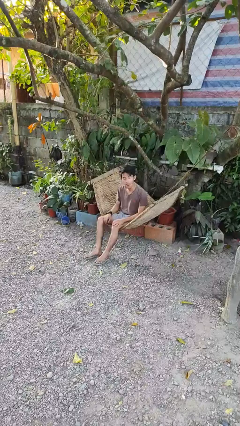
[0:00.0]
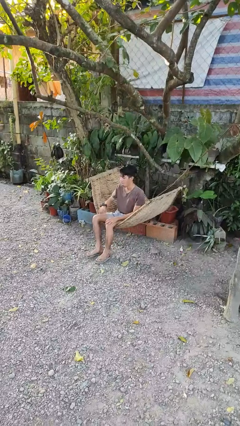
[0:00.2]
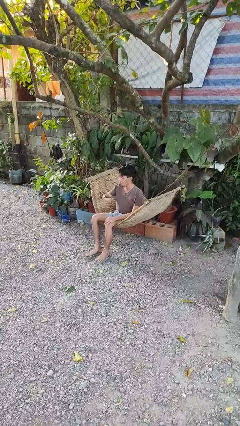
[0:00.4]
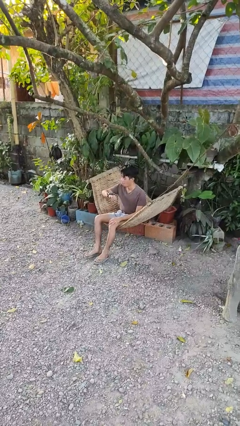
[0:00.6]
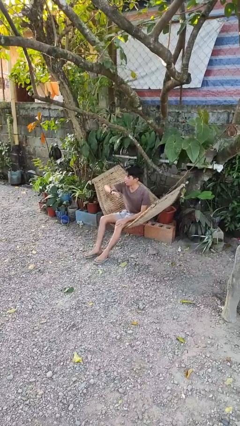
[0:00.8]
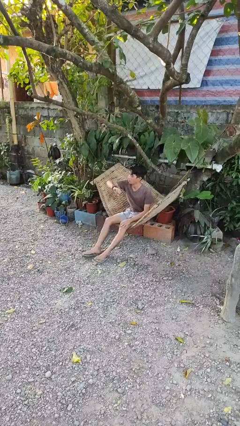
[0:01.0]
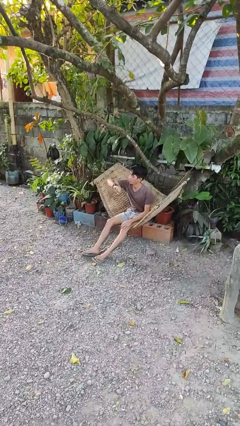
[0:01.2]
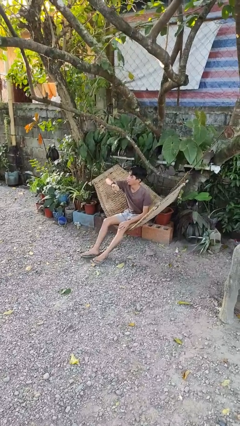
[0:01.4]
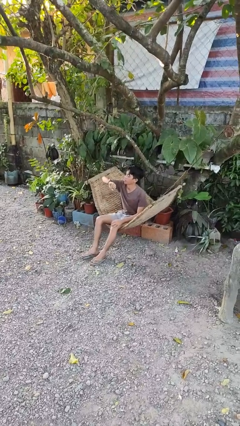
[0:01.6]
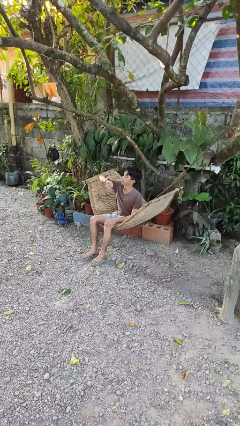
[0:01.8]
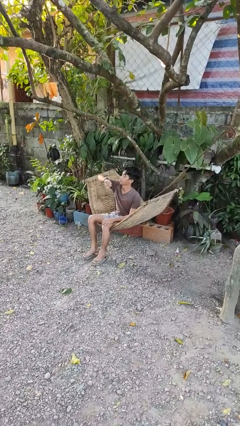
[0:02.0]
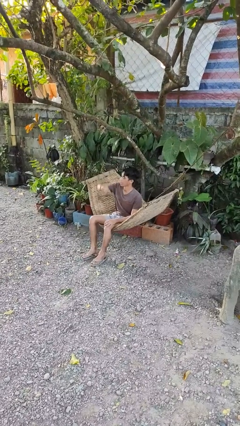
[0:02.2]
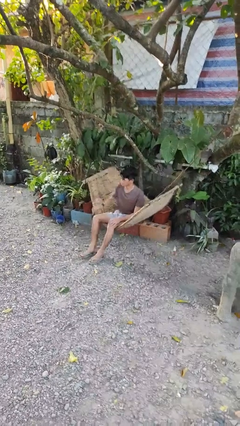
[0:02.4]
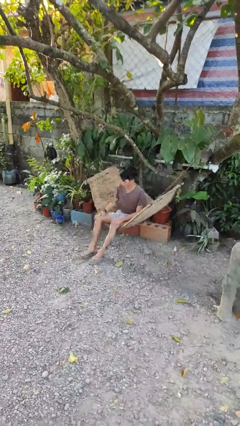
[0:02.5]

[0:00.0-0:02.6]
person looks at wristwatch

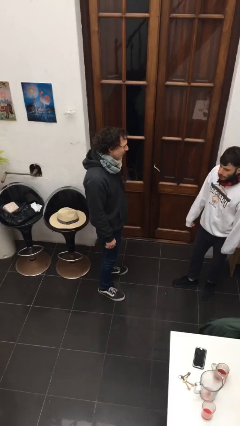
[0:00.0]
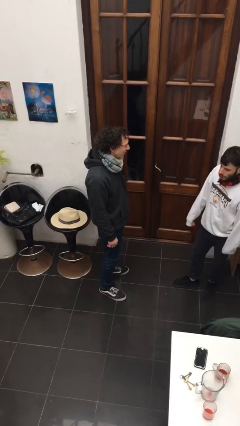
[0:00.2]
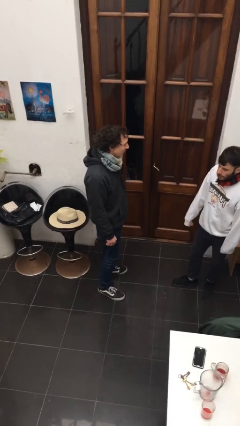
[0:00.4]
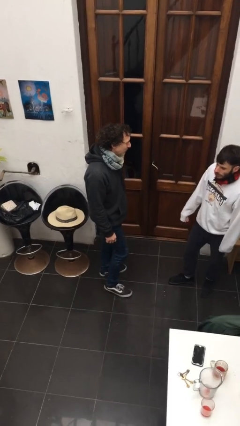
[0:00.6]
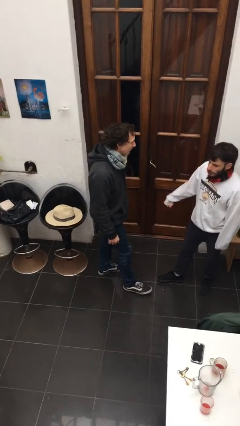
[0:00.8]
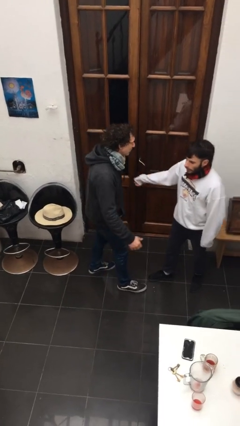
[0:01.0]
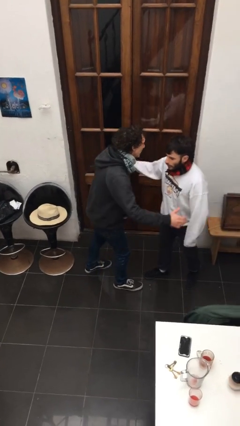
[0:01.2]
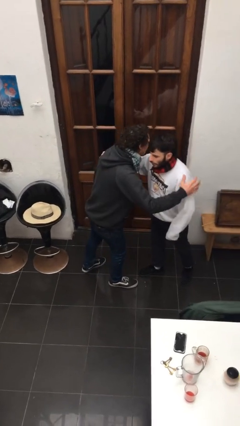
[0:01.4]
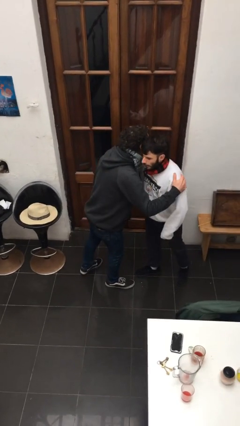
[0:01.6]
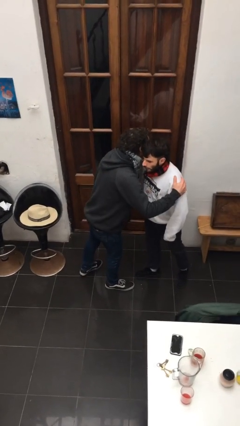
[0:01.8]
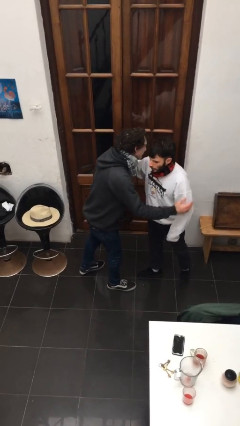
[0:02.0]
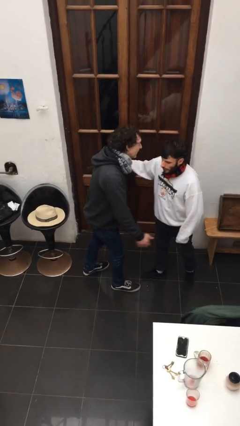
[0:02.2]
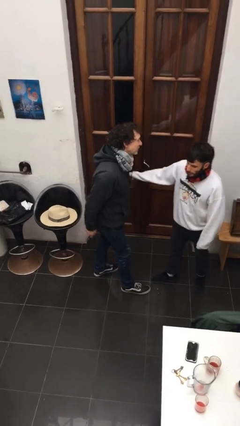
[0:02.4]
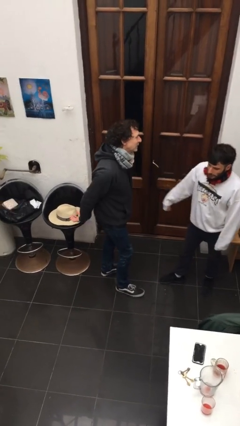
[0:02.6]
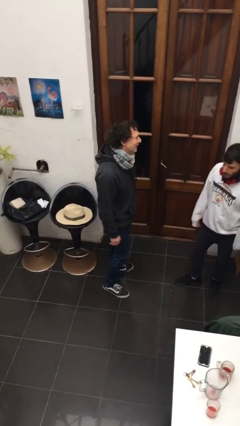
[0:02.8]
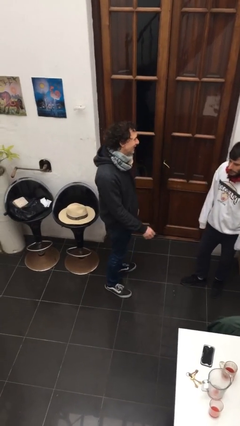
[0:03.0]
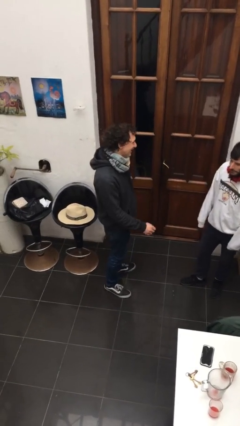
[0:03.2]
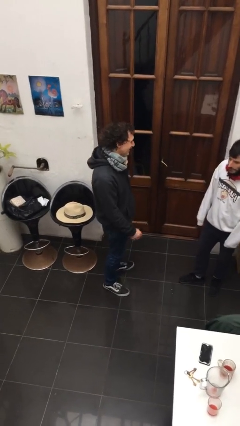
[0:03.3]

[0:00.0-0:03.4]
person kisses cheek of person

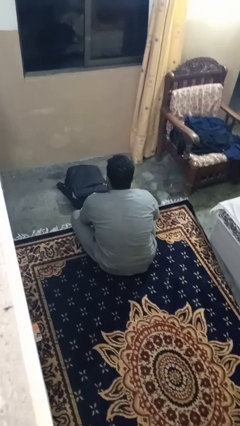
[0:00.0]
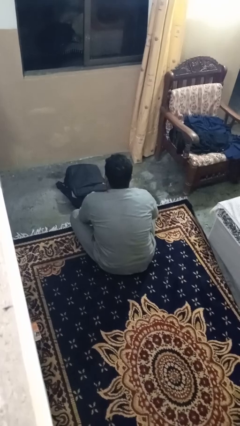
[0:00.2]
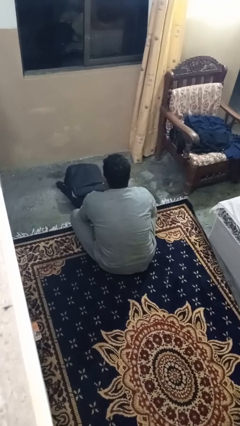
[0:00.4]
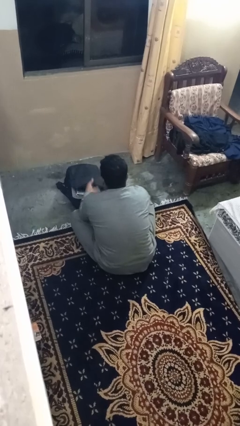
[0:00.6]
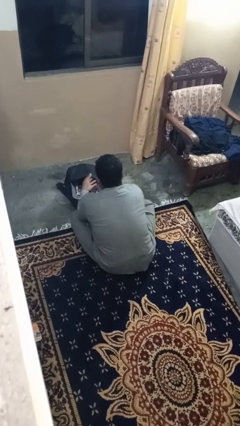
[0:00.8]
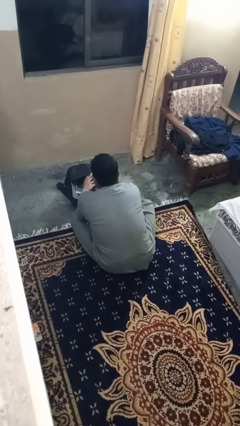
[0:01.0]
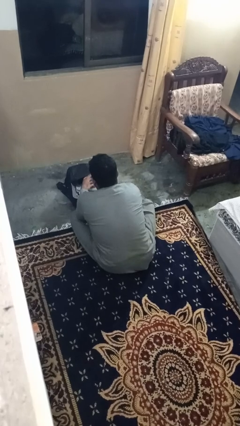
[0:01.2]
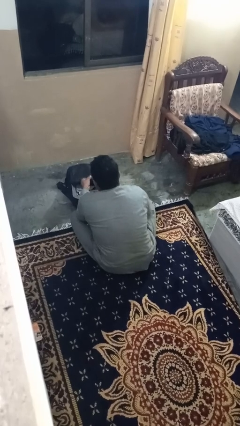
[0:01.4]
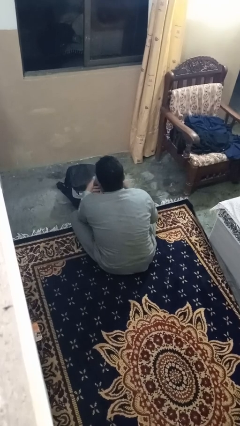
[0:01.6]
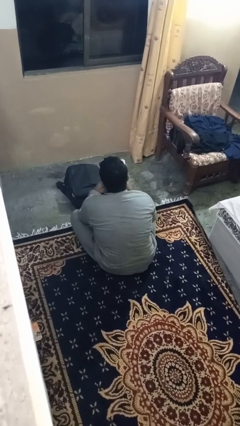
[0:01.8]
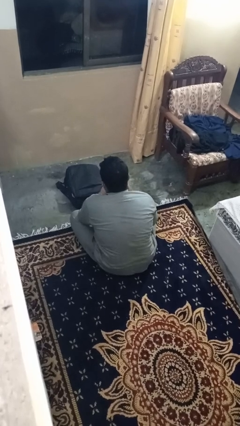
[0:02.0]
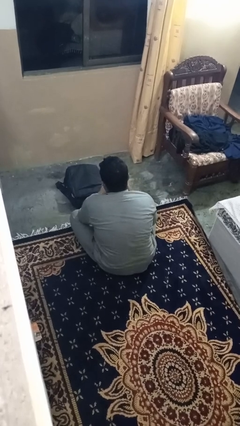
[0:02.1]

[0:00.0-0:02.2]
person takes object from bag

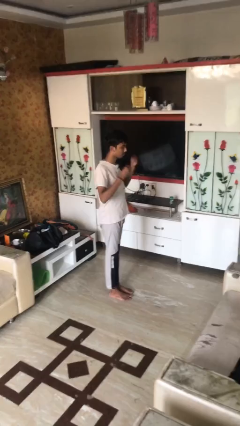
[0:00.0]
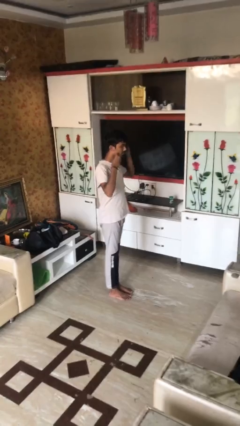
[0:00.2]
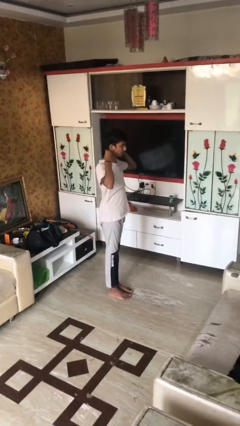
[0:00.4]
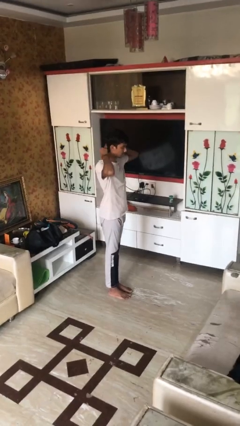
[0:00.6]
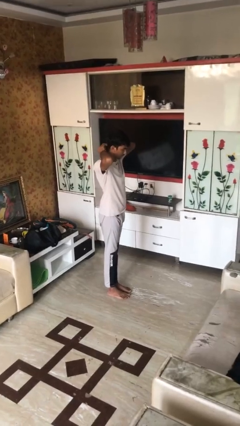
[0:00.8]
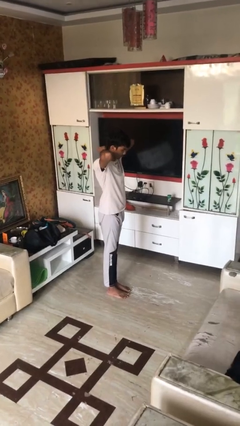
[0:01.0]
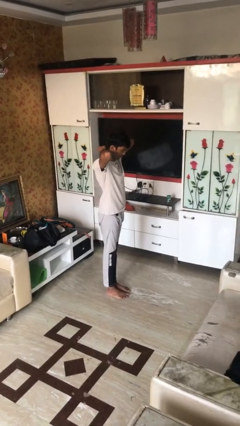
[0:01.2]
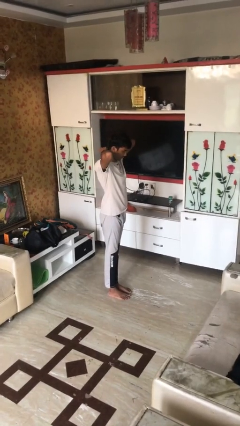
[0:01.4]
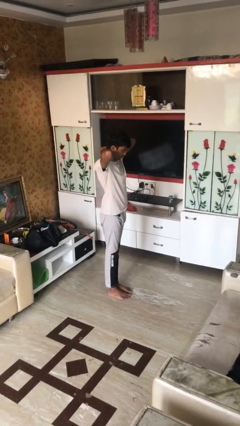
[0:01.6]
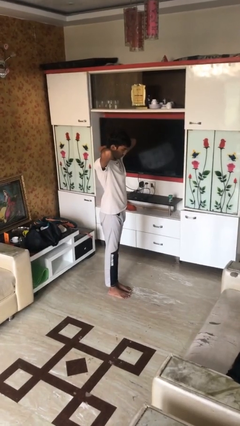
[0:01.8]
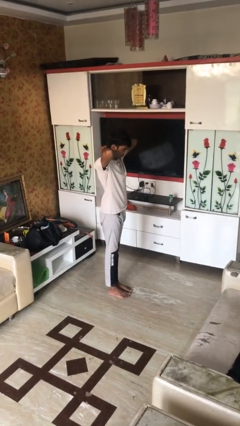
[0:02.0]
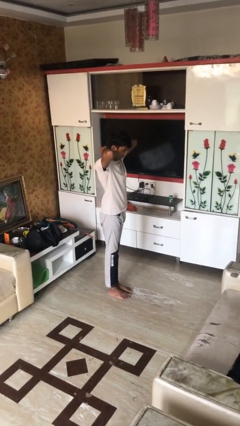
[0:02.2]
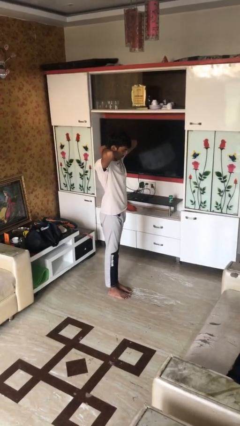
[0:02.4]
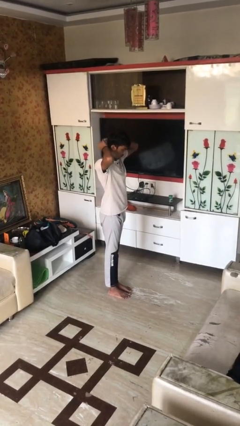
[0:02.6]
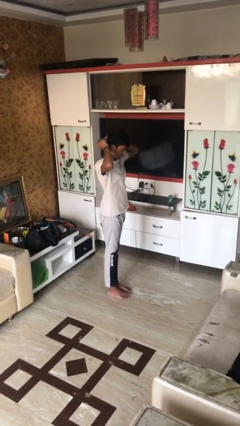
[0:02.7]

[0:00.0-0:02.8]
person puts on necklace

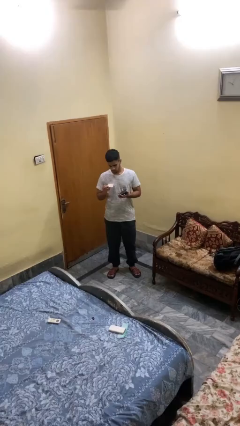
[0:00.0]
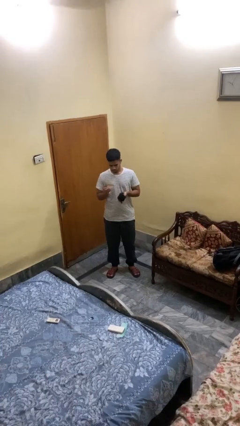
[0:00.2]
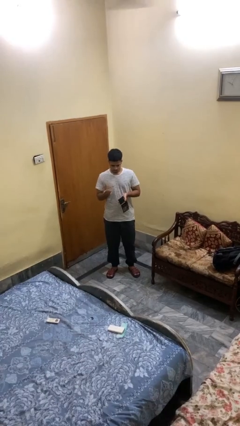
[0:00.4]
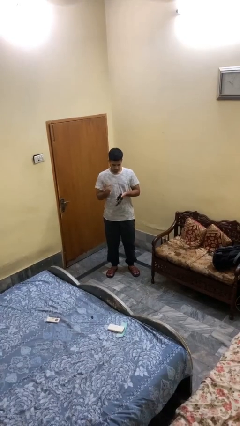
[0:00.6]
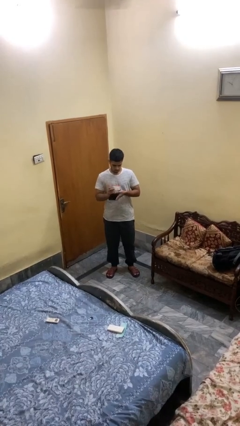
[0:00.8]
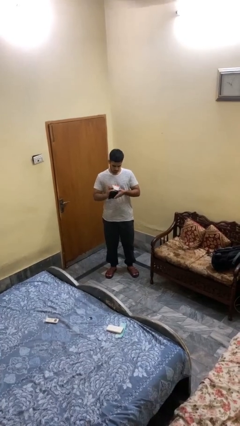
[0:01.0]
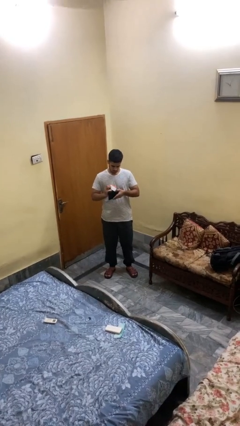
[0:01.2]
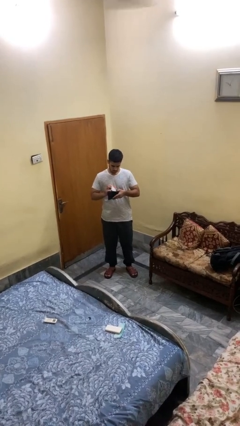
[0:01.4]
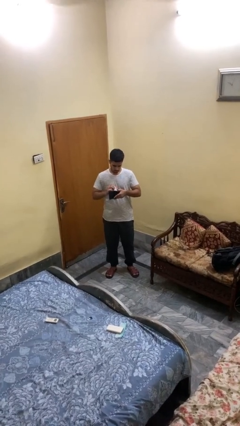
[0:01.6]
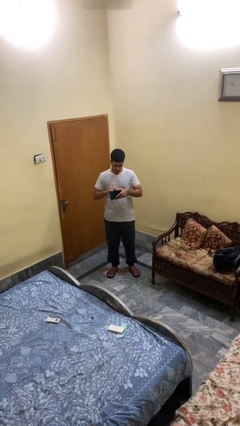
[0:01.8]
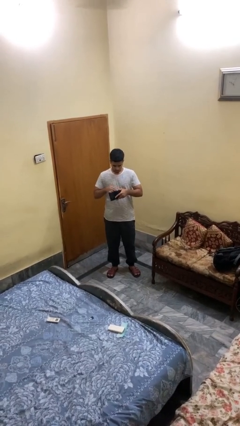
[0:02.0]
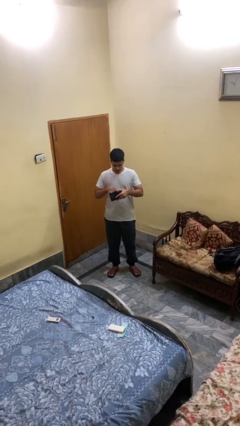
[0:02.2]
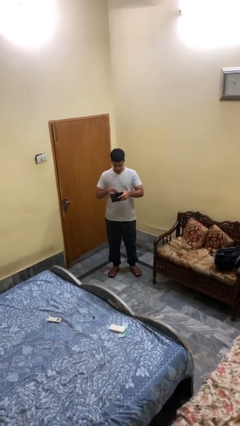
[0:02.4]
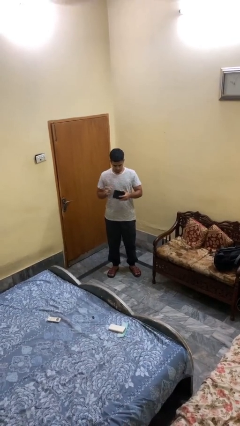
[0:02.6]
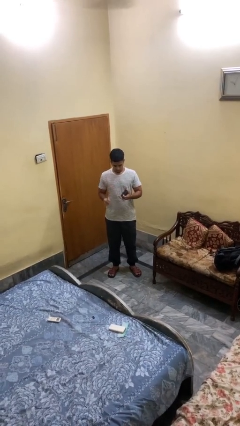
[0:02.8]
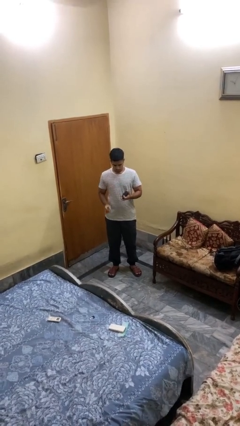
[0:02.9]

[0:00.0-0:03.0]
person puts object into purse

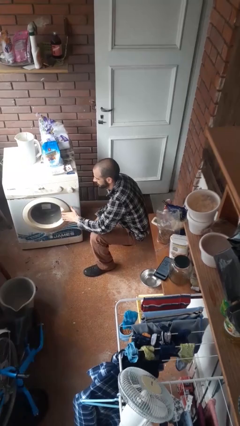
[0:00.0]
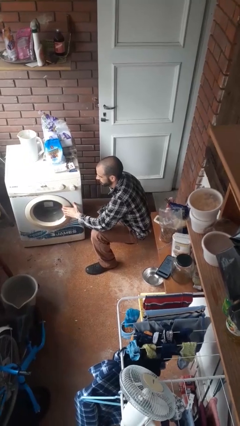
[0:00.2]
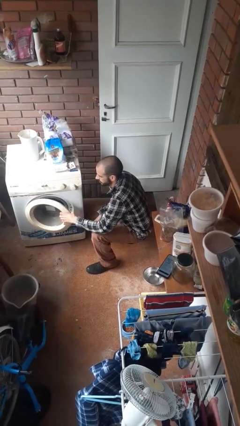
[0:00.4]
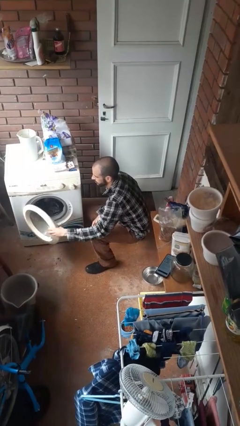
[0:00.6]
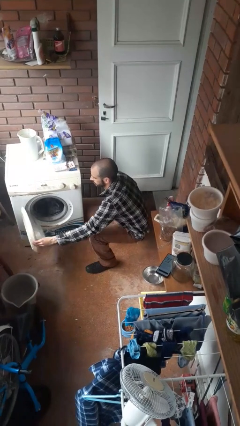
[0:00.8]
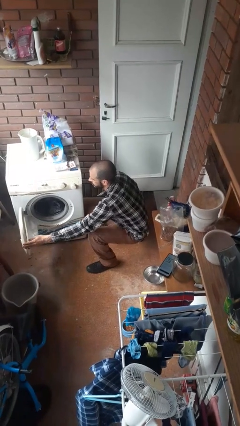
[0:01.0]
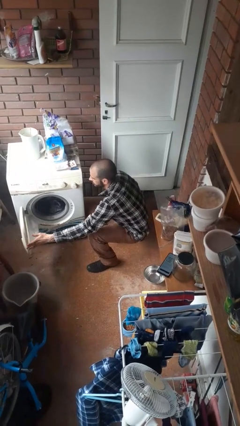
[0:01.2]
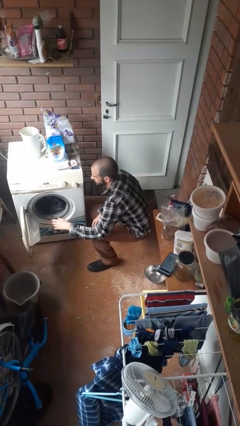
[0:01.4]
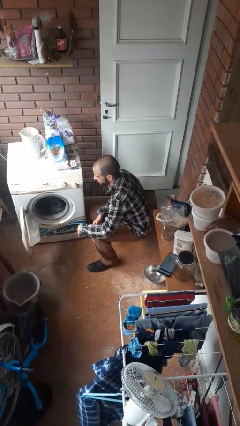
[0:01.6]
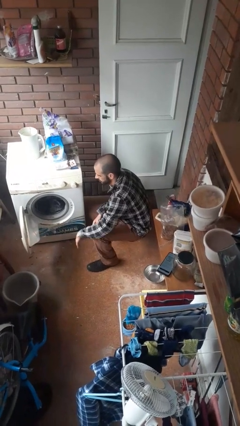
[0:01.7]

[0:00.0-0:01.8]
person opens clothes washer

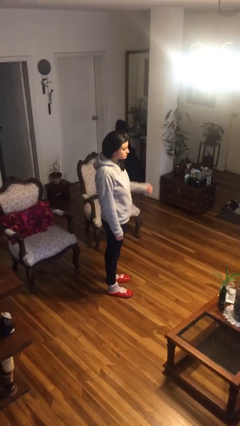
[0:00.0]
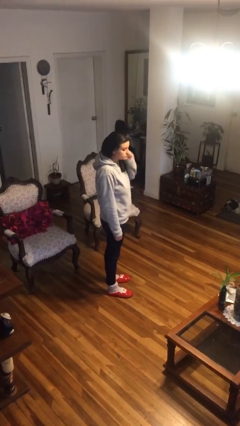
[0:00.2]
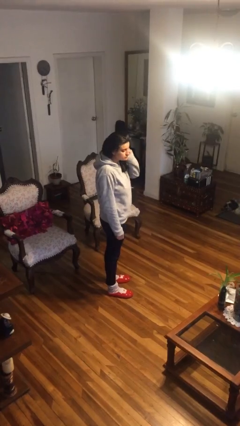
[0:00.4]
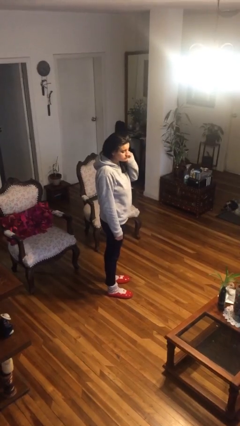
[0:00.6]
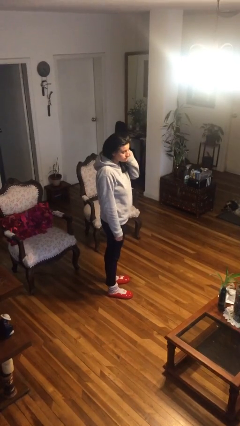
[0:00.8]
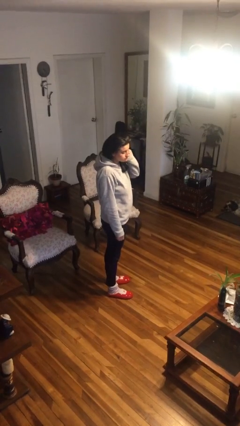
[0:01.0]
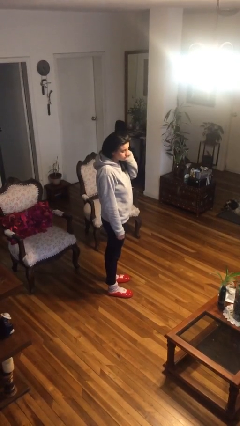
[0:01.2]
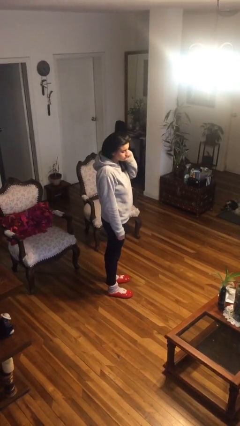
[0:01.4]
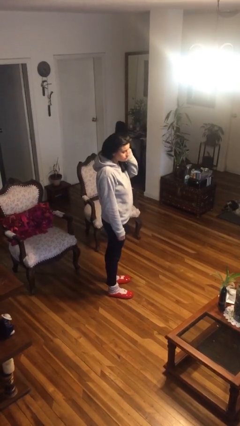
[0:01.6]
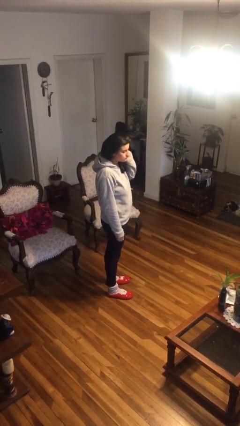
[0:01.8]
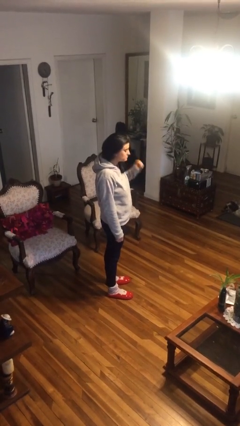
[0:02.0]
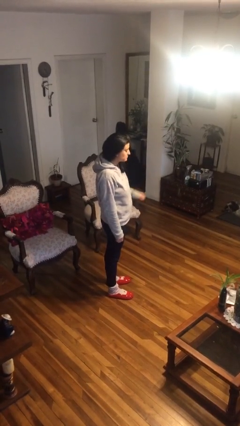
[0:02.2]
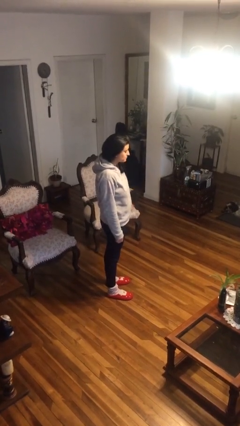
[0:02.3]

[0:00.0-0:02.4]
person touches earlobe
